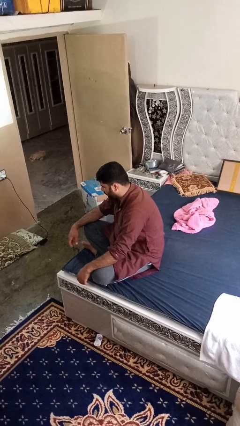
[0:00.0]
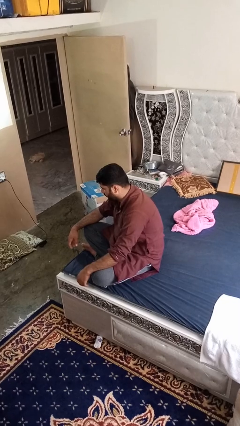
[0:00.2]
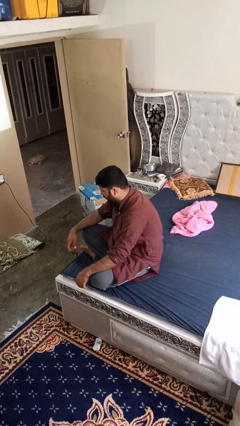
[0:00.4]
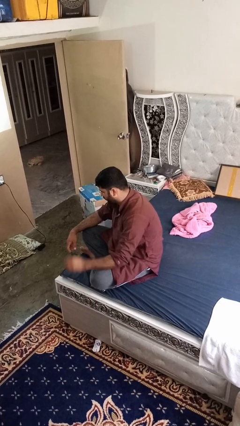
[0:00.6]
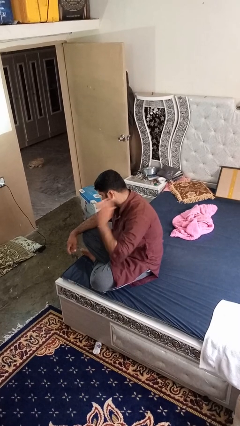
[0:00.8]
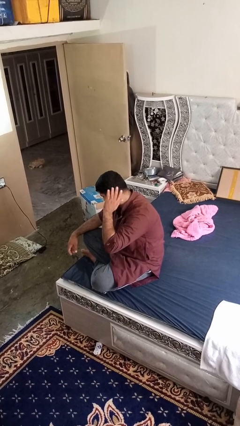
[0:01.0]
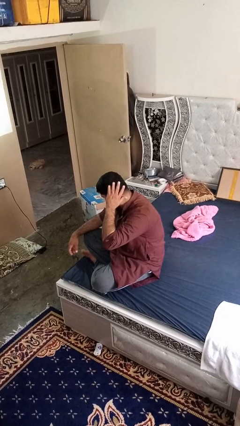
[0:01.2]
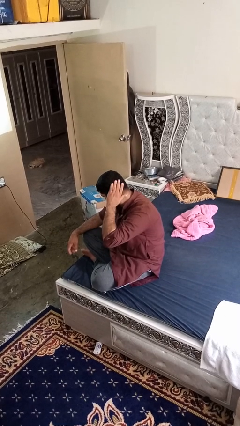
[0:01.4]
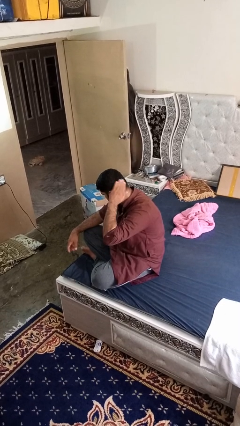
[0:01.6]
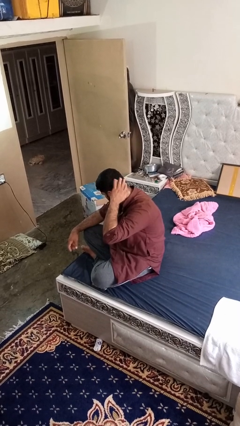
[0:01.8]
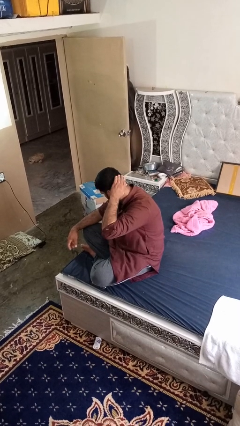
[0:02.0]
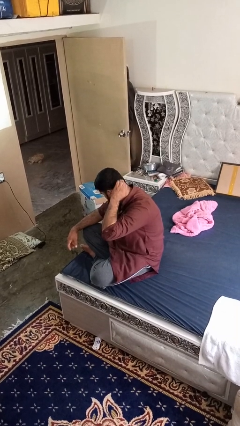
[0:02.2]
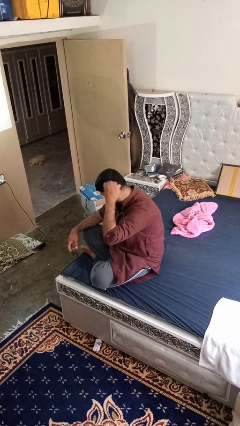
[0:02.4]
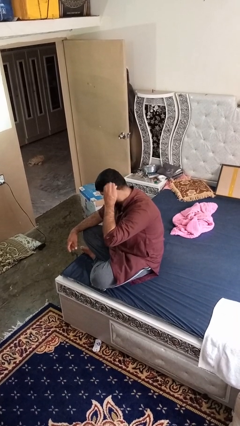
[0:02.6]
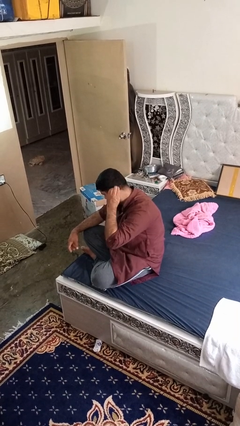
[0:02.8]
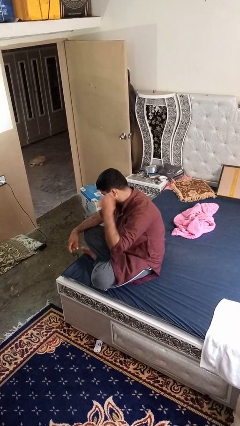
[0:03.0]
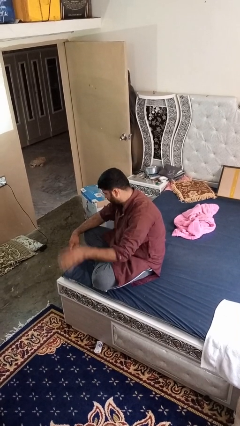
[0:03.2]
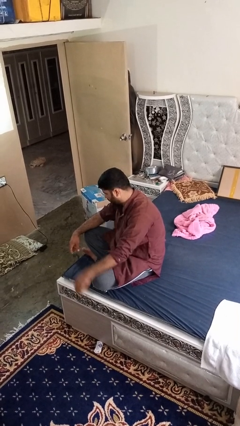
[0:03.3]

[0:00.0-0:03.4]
person strokes hair

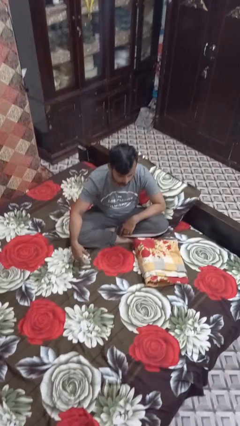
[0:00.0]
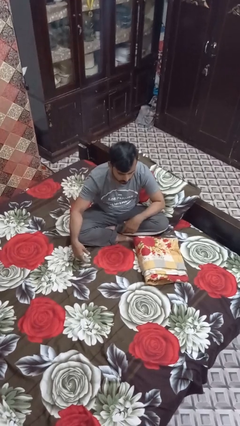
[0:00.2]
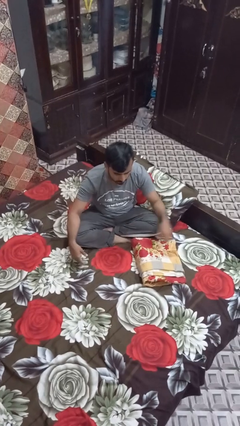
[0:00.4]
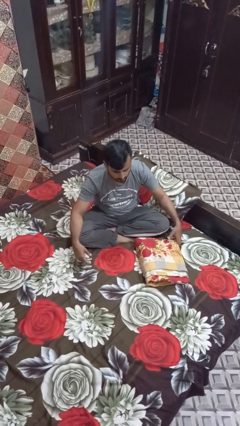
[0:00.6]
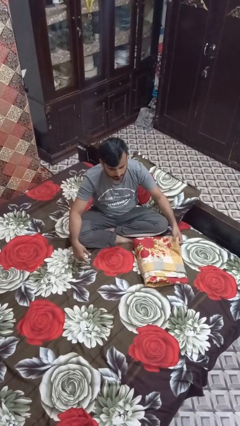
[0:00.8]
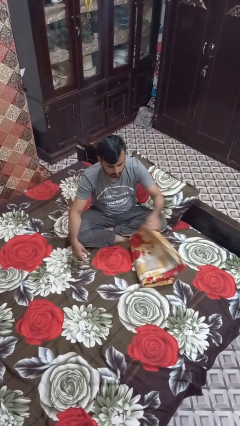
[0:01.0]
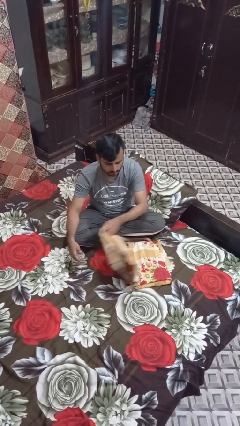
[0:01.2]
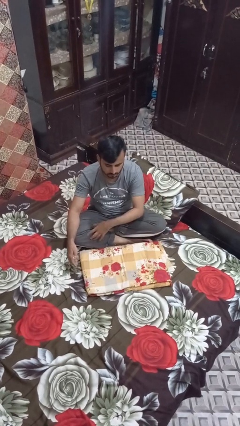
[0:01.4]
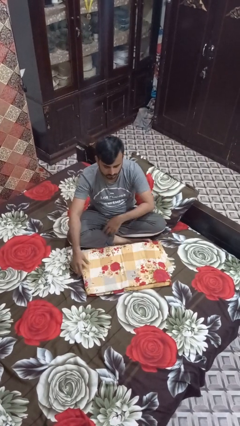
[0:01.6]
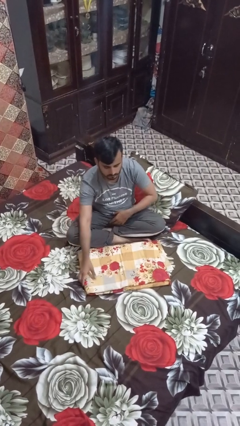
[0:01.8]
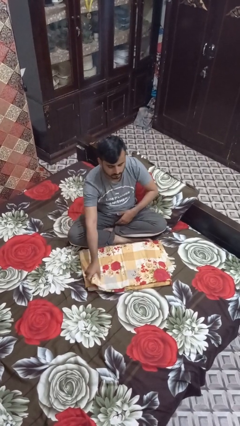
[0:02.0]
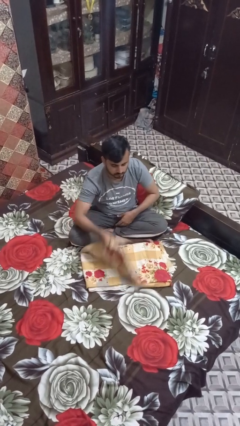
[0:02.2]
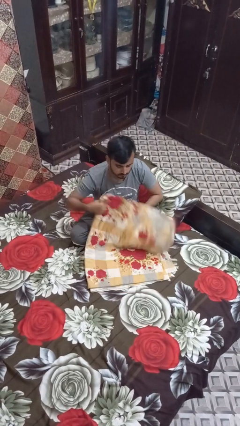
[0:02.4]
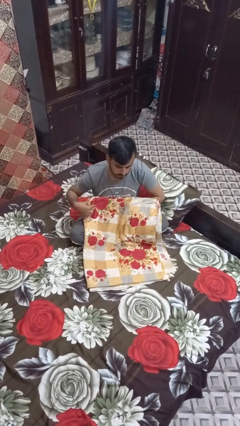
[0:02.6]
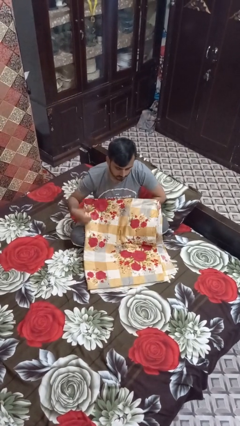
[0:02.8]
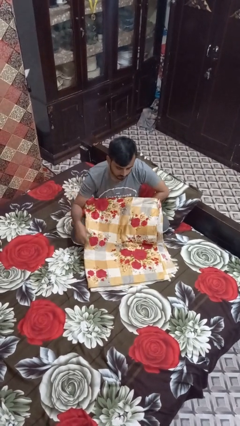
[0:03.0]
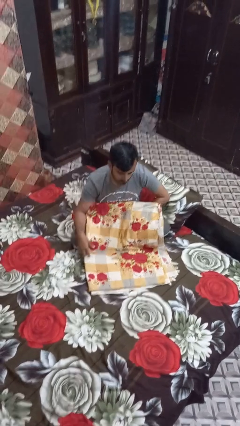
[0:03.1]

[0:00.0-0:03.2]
person unfolds blanket

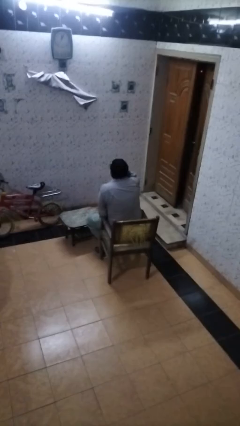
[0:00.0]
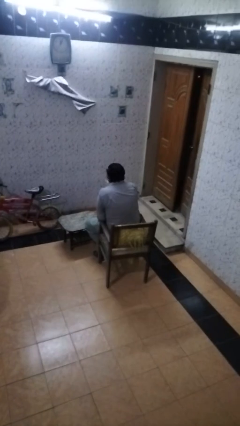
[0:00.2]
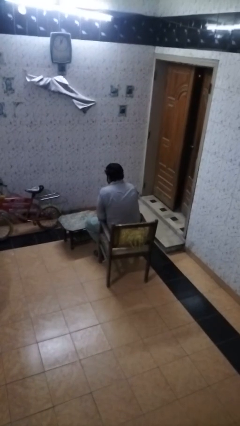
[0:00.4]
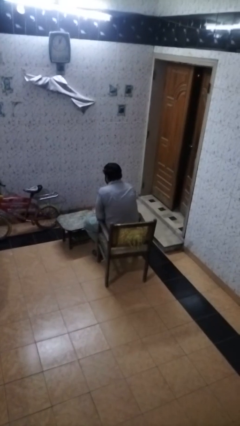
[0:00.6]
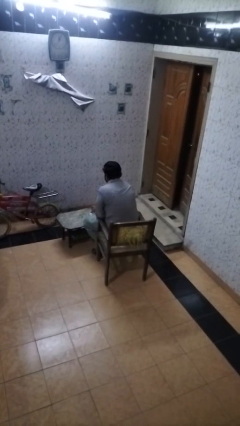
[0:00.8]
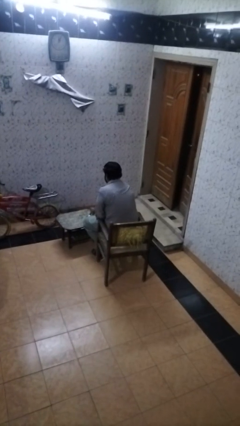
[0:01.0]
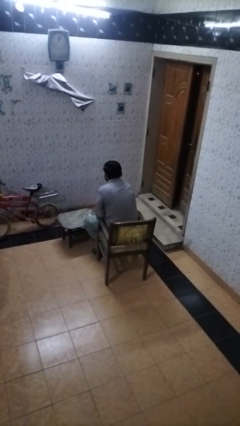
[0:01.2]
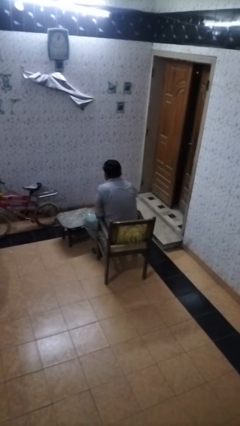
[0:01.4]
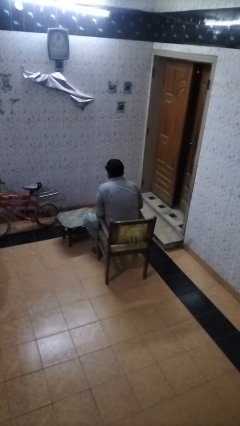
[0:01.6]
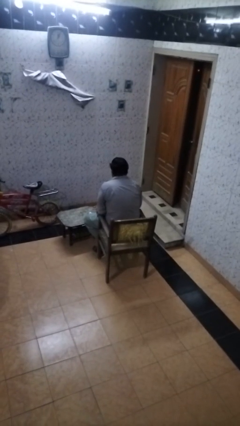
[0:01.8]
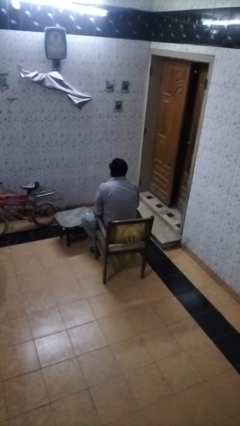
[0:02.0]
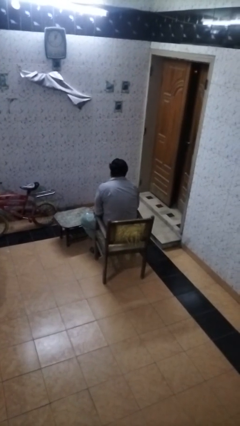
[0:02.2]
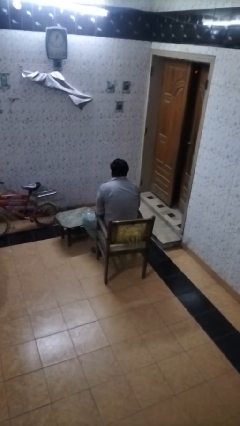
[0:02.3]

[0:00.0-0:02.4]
person puts down object on table

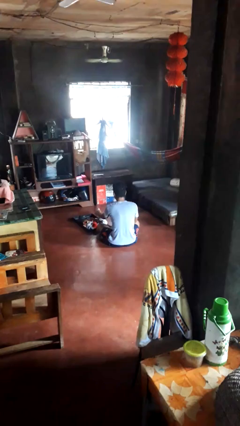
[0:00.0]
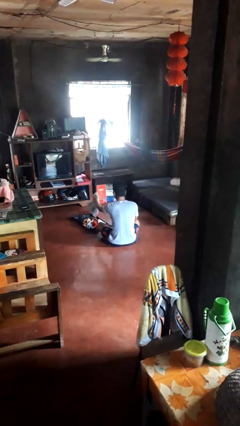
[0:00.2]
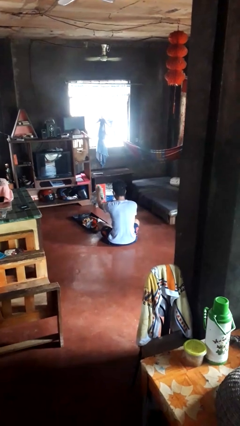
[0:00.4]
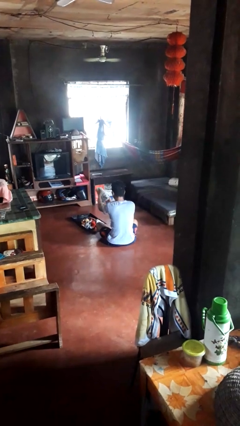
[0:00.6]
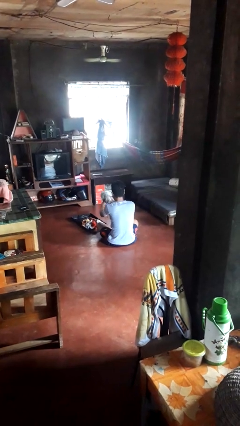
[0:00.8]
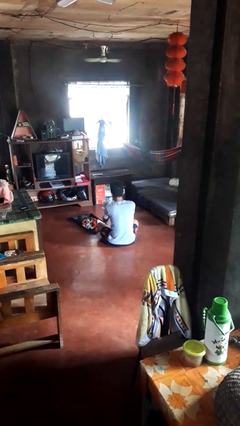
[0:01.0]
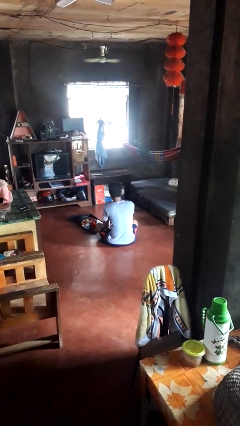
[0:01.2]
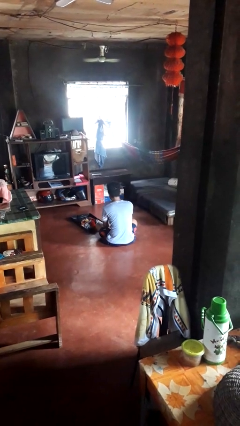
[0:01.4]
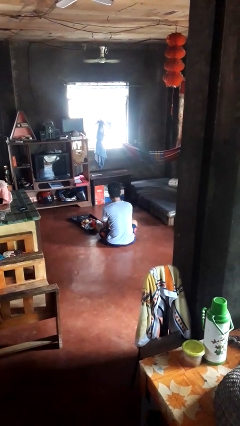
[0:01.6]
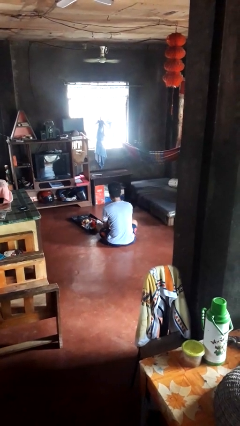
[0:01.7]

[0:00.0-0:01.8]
person unloads clothes from suitcase

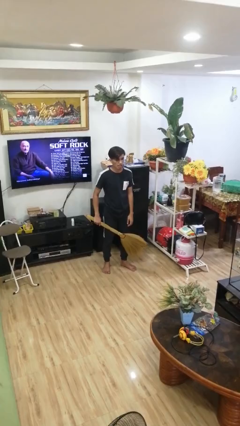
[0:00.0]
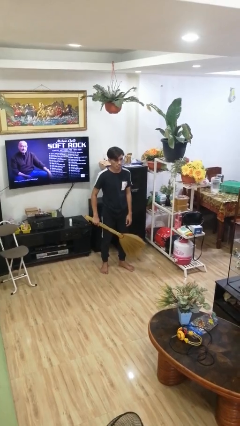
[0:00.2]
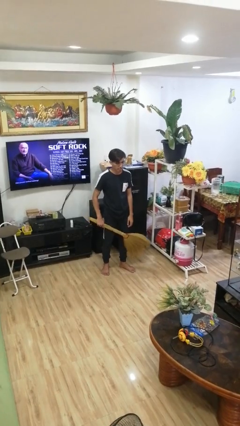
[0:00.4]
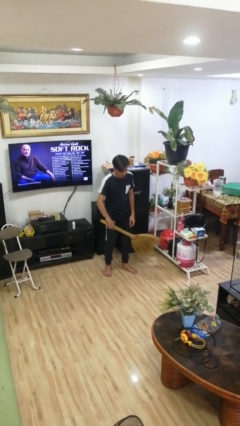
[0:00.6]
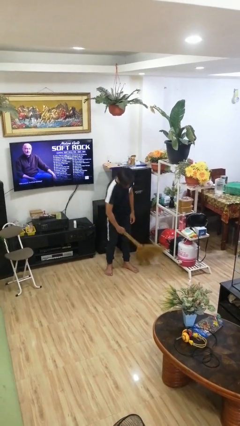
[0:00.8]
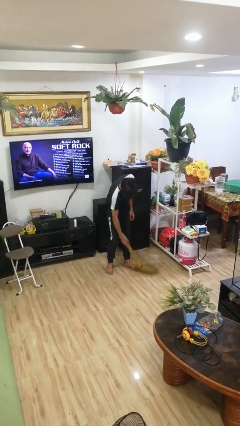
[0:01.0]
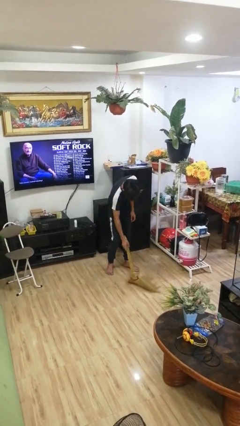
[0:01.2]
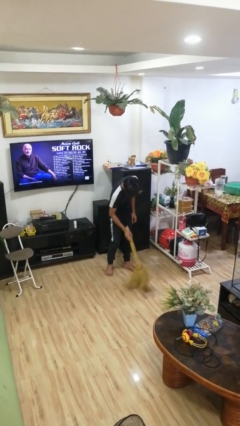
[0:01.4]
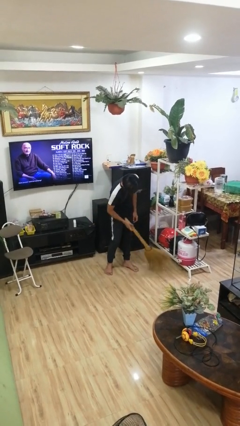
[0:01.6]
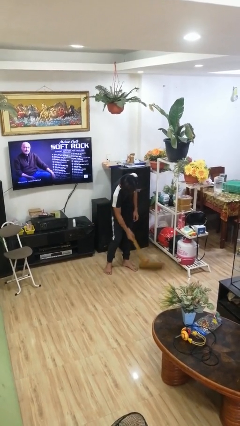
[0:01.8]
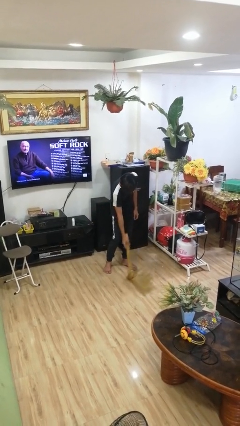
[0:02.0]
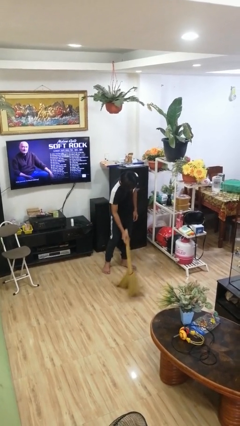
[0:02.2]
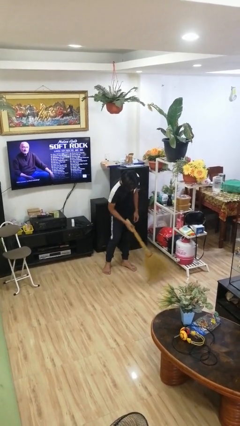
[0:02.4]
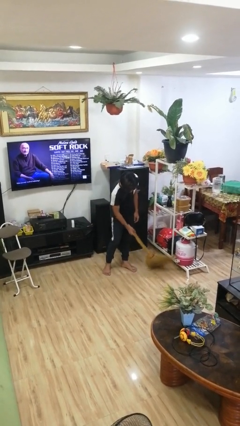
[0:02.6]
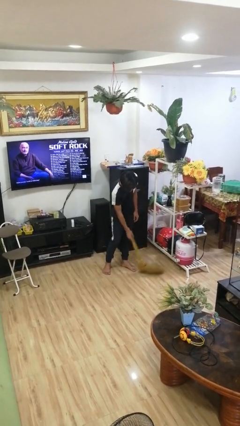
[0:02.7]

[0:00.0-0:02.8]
person sweeps floor

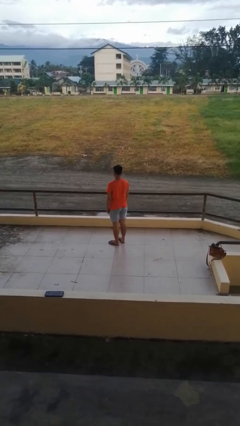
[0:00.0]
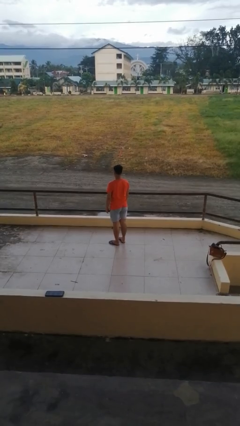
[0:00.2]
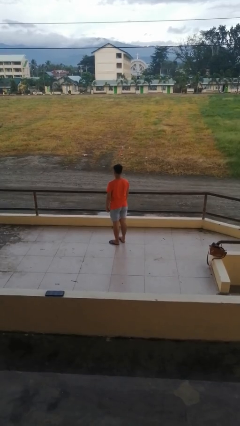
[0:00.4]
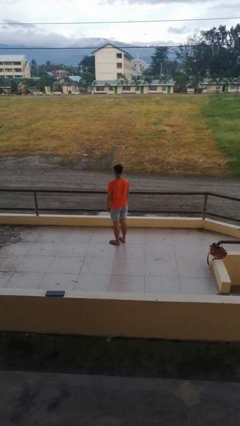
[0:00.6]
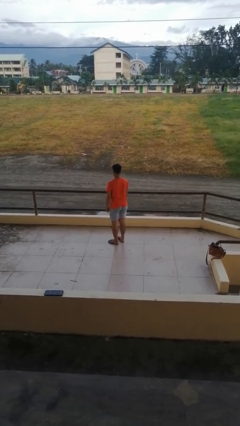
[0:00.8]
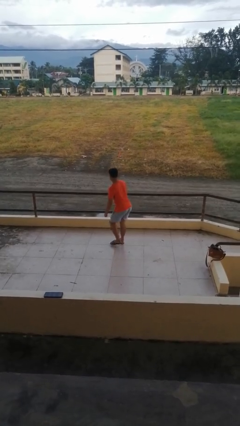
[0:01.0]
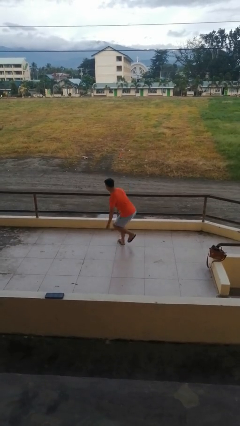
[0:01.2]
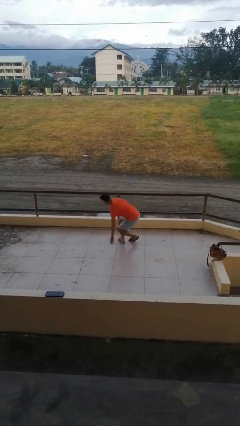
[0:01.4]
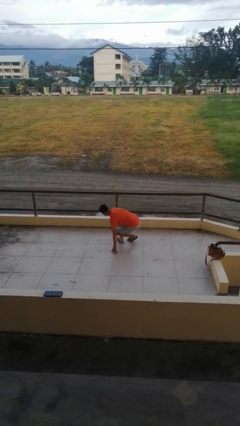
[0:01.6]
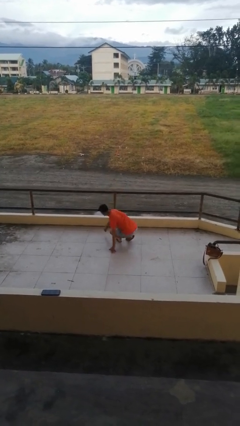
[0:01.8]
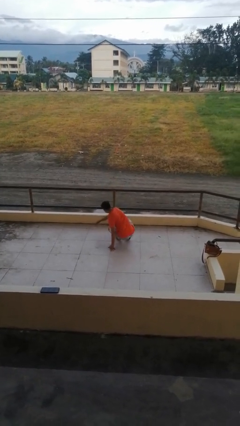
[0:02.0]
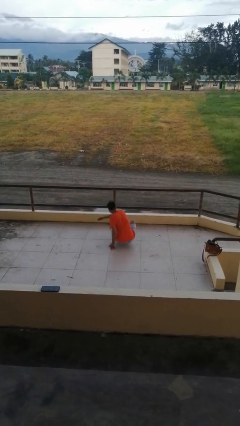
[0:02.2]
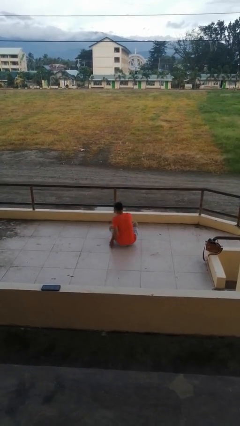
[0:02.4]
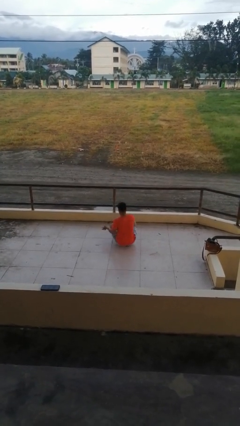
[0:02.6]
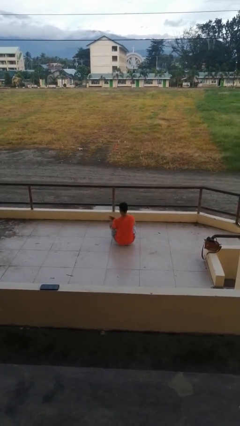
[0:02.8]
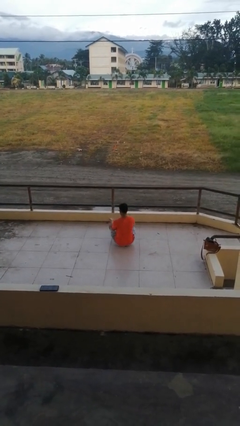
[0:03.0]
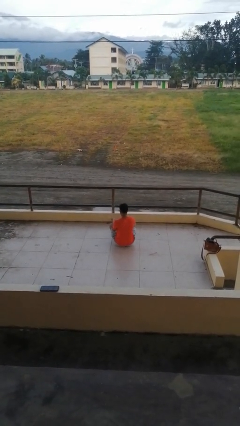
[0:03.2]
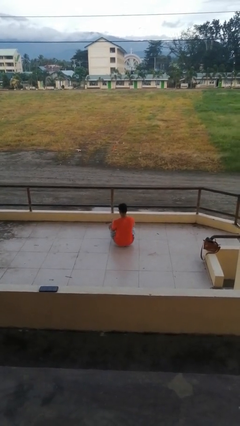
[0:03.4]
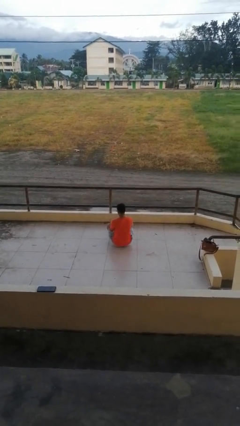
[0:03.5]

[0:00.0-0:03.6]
person sits crisscross
